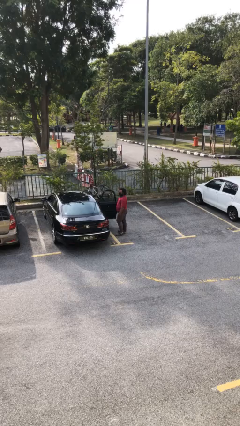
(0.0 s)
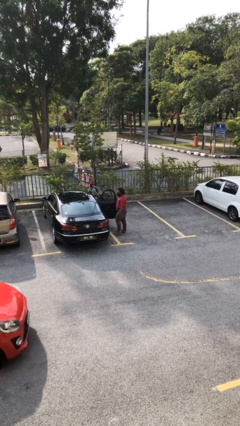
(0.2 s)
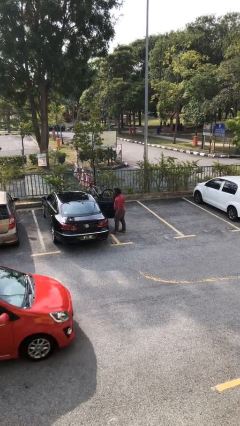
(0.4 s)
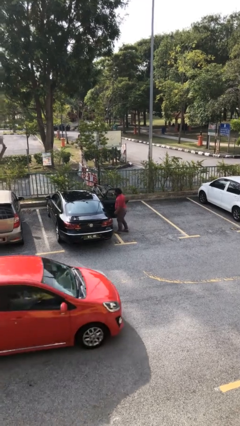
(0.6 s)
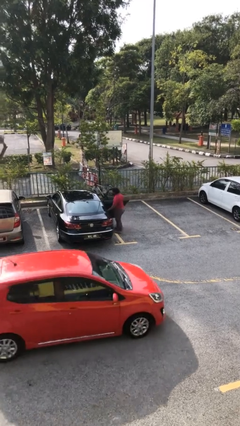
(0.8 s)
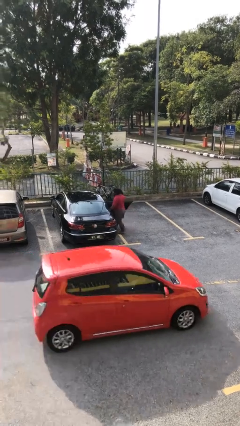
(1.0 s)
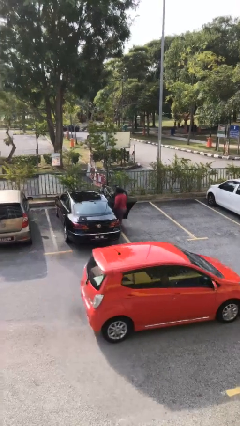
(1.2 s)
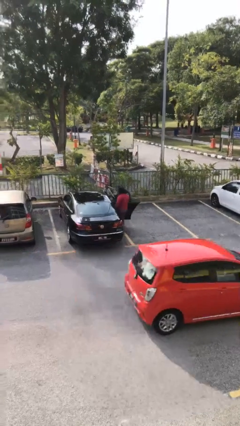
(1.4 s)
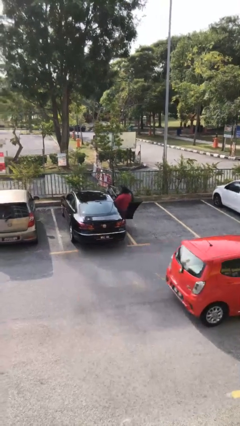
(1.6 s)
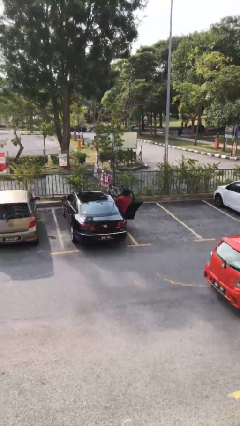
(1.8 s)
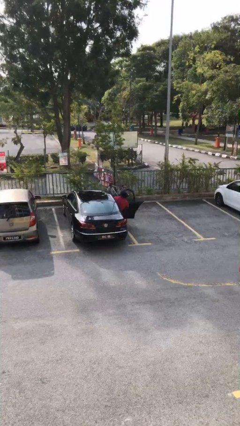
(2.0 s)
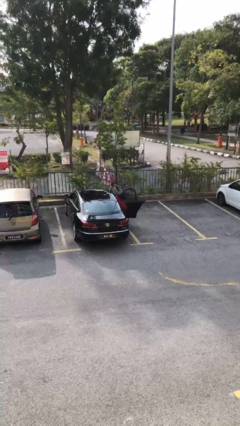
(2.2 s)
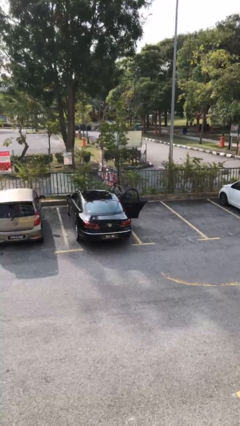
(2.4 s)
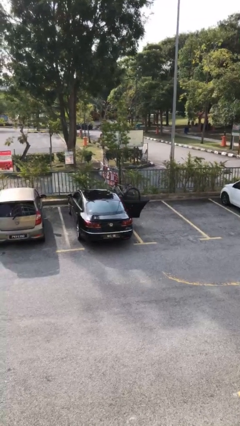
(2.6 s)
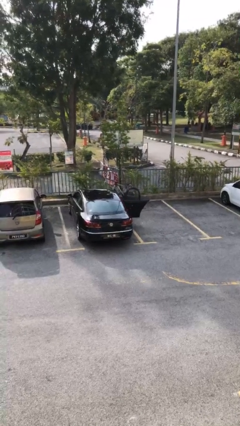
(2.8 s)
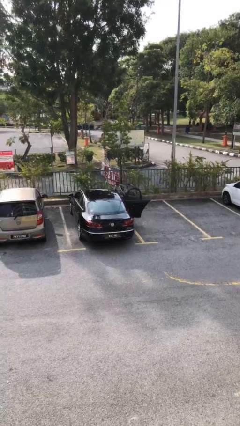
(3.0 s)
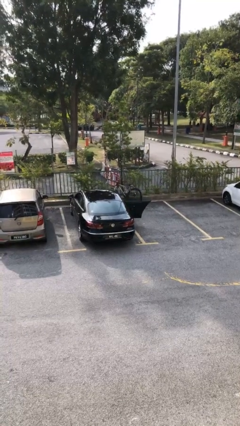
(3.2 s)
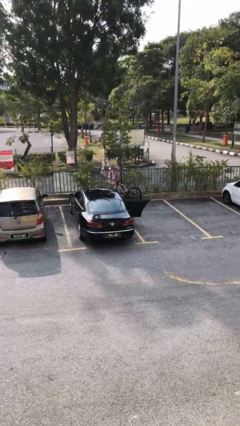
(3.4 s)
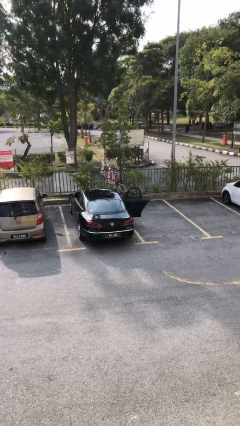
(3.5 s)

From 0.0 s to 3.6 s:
person enters car

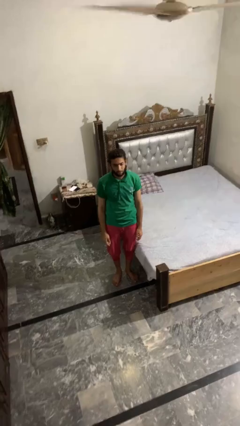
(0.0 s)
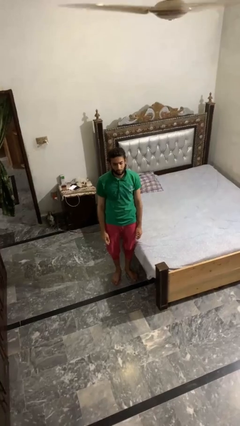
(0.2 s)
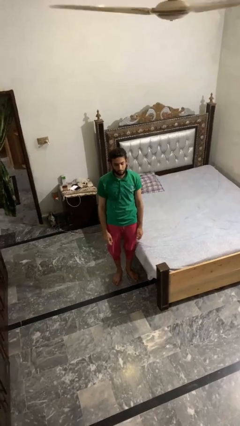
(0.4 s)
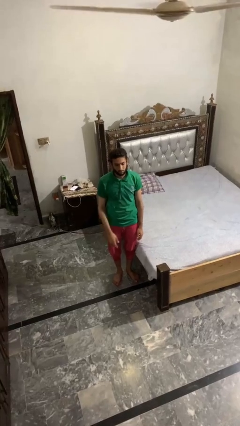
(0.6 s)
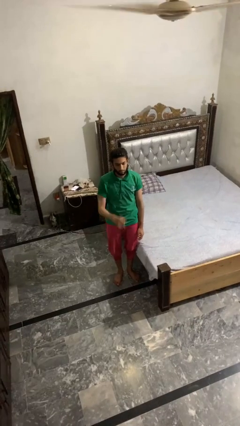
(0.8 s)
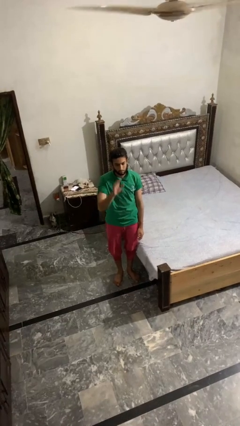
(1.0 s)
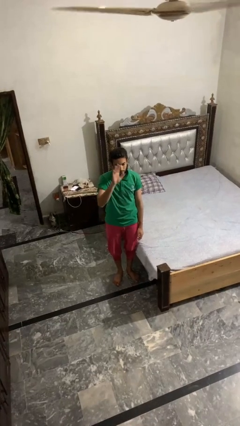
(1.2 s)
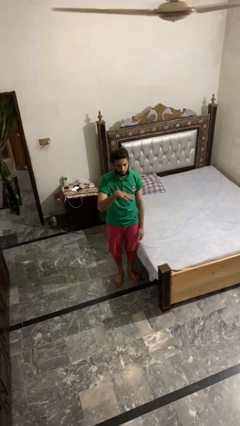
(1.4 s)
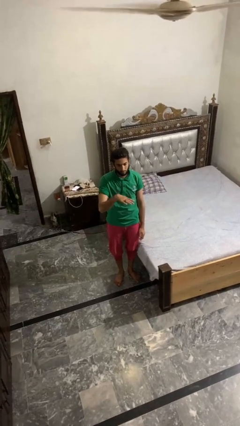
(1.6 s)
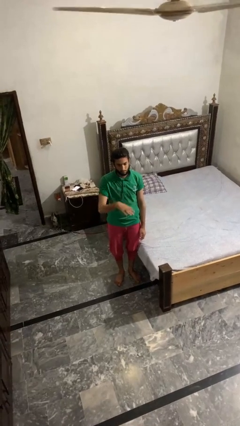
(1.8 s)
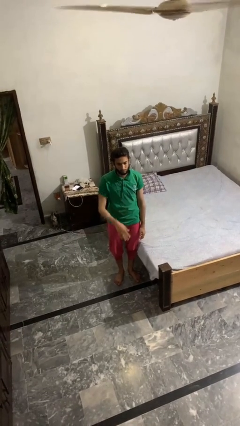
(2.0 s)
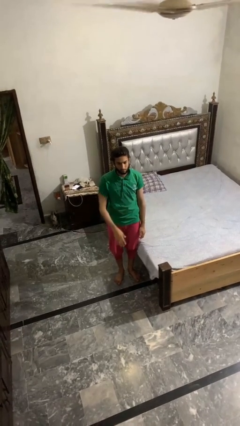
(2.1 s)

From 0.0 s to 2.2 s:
person gestures swipe down

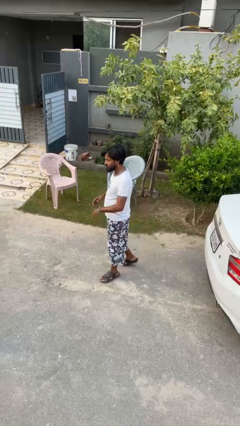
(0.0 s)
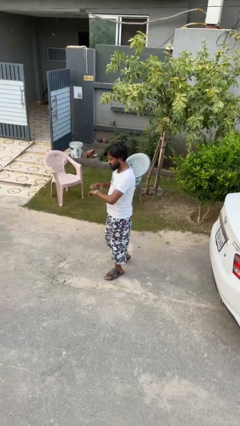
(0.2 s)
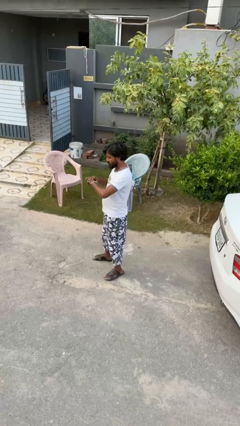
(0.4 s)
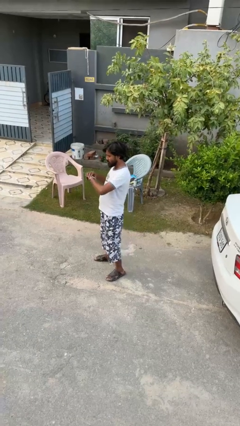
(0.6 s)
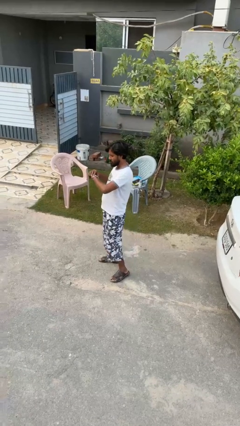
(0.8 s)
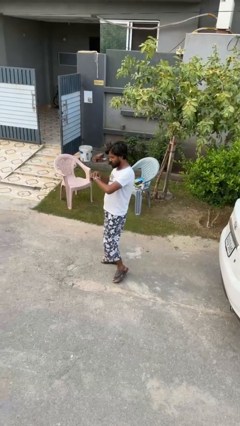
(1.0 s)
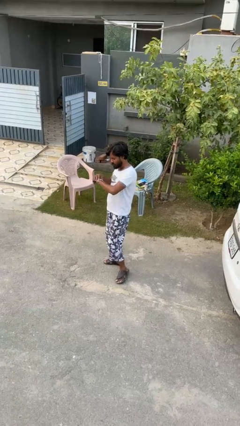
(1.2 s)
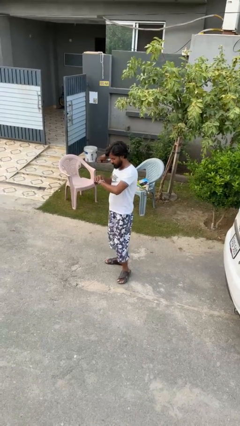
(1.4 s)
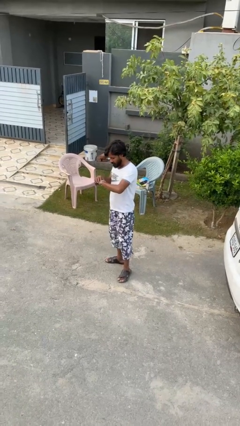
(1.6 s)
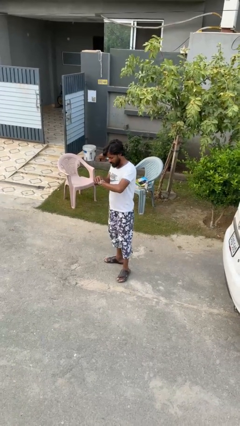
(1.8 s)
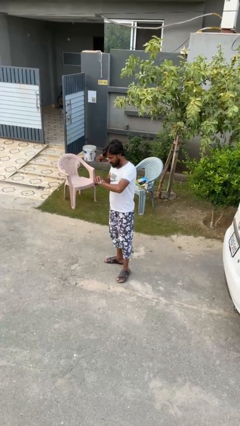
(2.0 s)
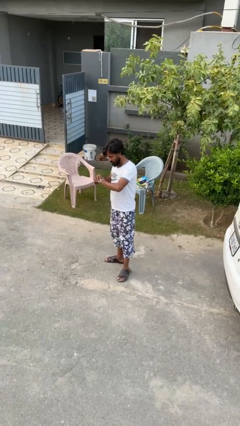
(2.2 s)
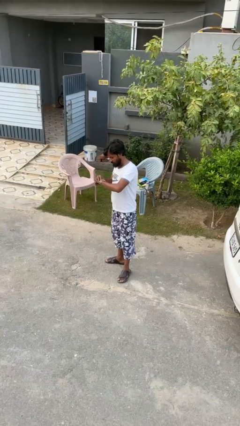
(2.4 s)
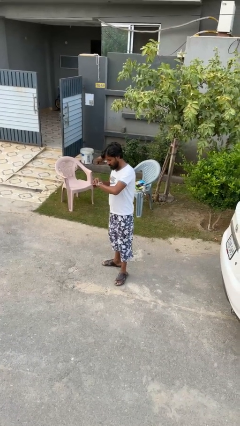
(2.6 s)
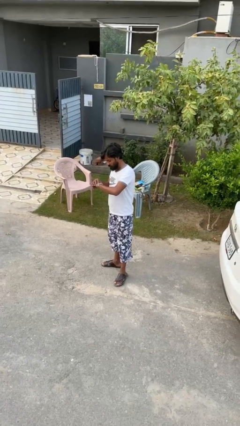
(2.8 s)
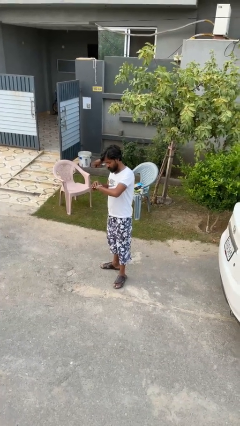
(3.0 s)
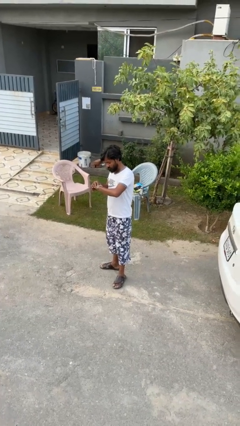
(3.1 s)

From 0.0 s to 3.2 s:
person looks at wristwatch

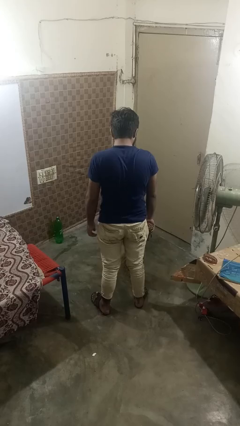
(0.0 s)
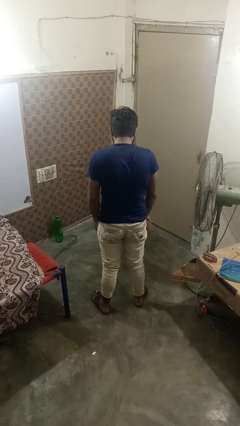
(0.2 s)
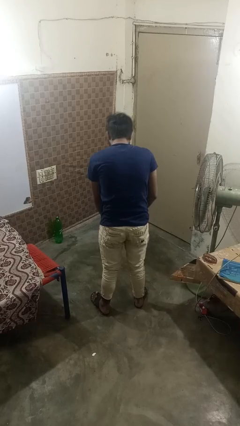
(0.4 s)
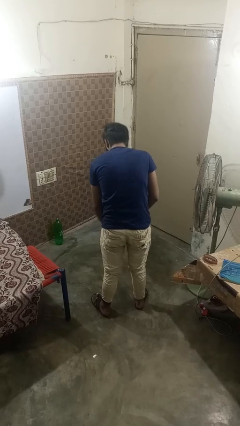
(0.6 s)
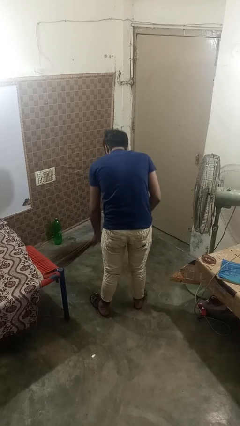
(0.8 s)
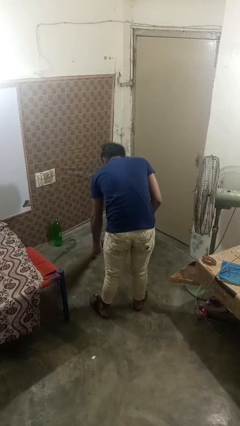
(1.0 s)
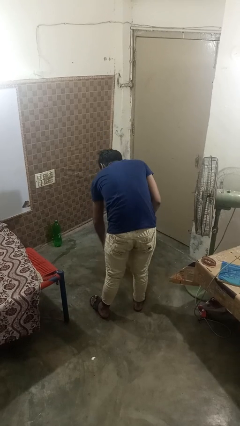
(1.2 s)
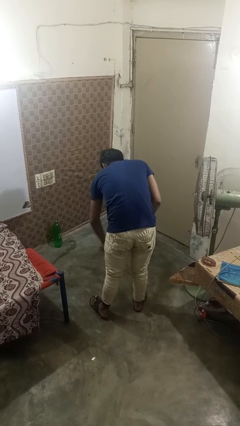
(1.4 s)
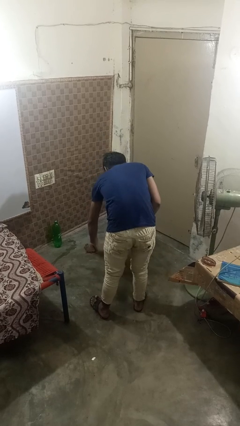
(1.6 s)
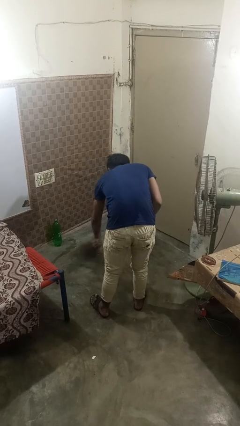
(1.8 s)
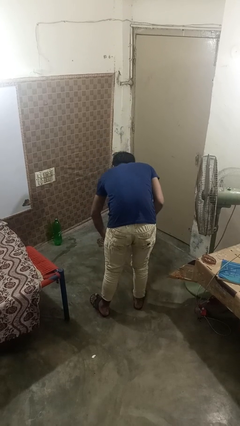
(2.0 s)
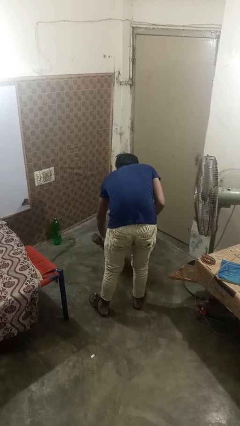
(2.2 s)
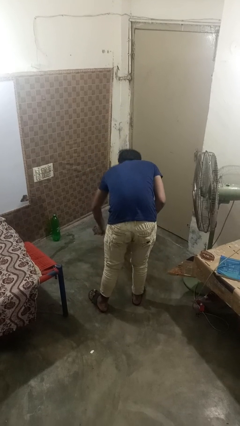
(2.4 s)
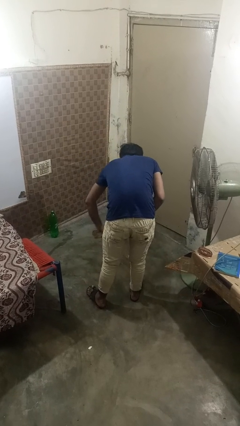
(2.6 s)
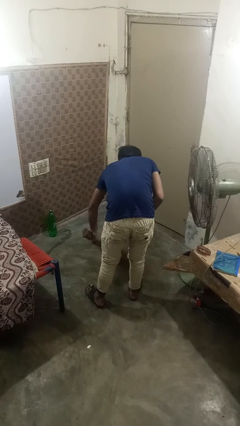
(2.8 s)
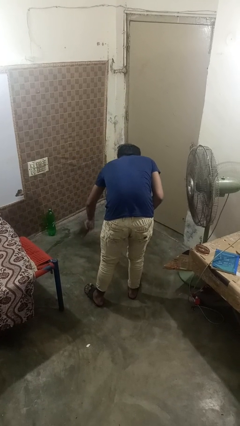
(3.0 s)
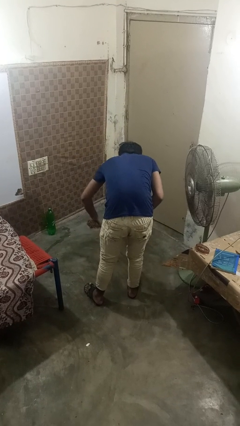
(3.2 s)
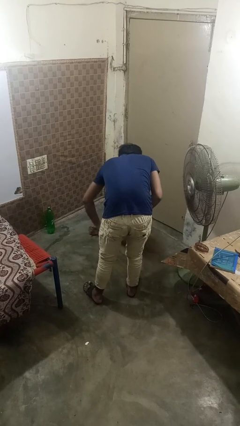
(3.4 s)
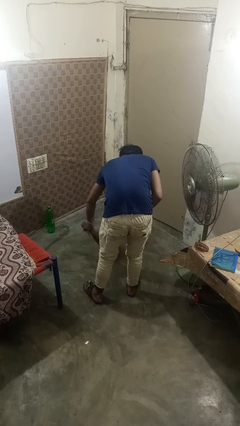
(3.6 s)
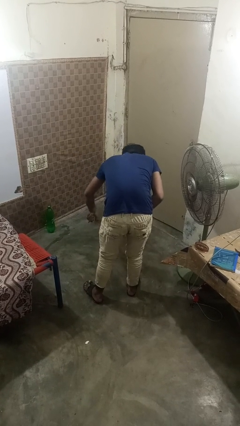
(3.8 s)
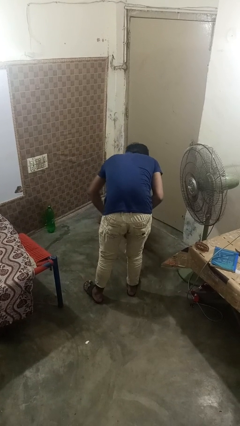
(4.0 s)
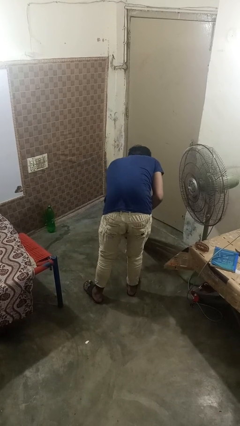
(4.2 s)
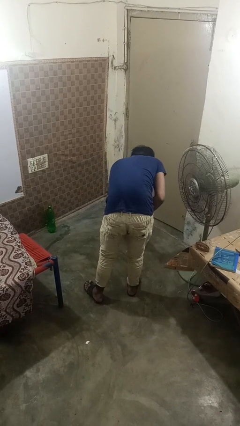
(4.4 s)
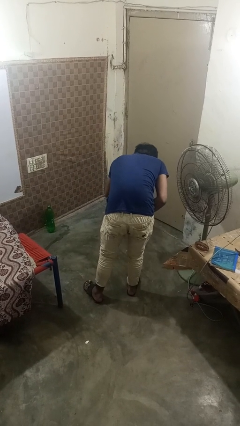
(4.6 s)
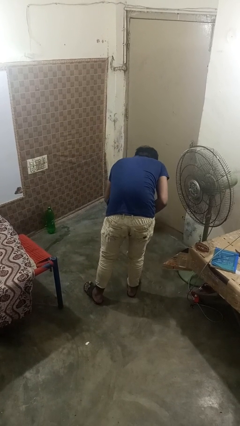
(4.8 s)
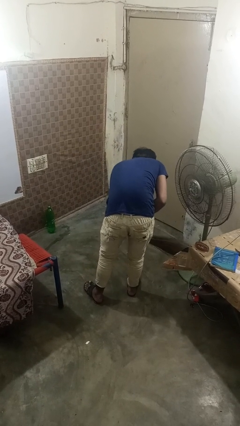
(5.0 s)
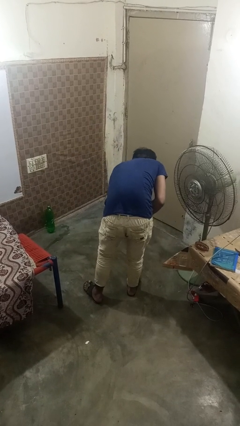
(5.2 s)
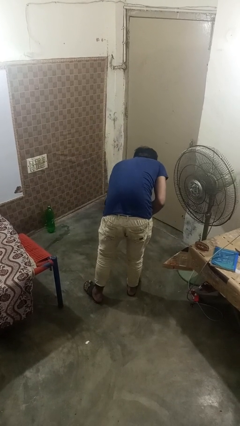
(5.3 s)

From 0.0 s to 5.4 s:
person sweeps floor

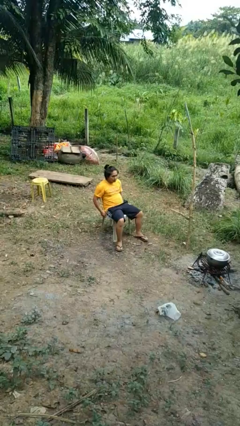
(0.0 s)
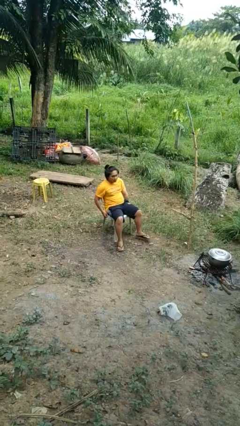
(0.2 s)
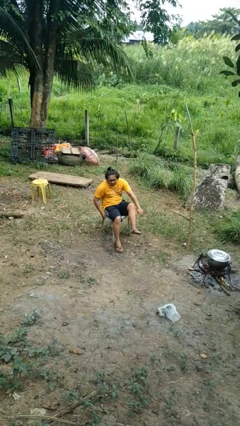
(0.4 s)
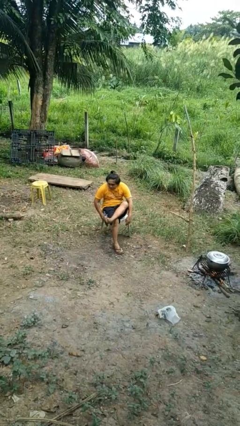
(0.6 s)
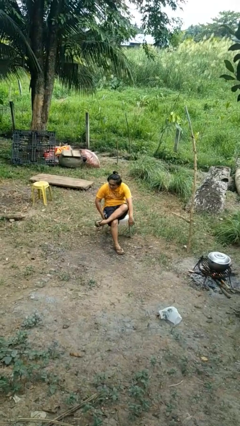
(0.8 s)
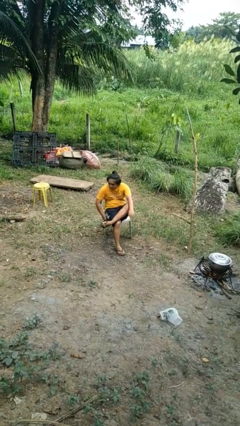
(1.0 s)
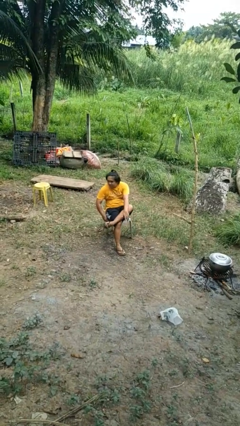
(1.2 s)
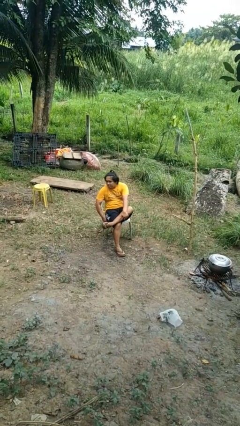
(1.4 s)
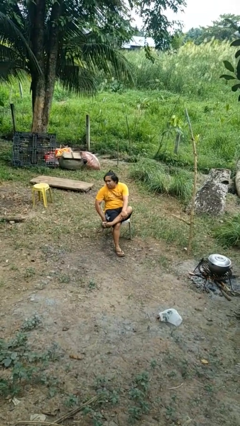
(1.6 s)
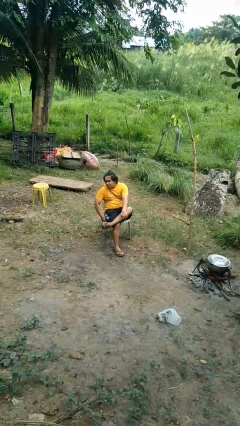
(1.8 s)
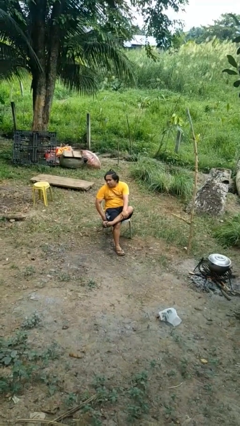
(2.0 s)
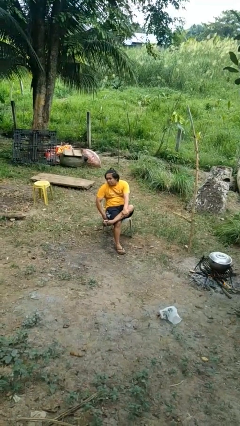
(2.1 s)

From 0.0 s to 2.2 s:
person crosses legs

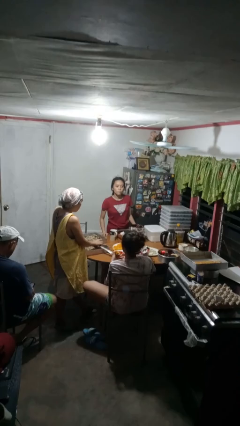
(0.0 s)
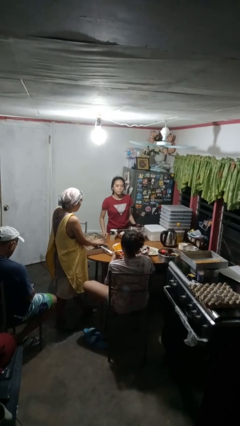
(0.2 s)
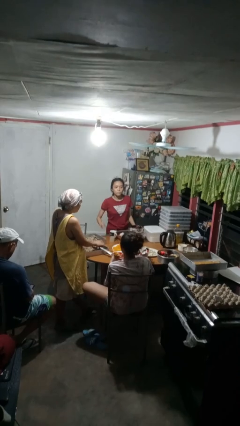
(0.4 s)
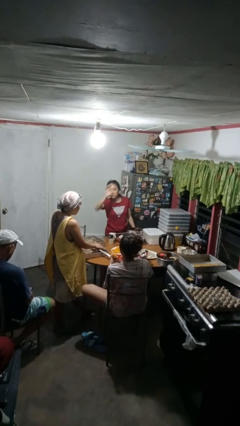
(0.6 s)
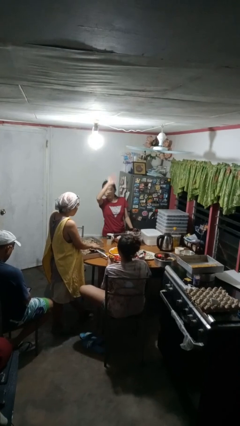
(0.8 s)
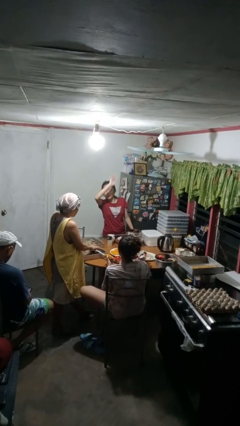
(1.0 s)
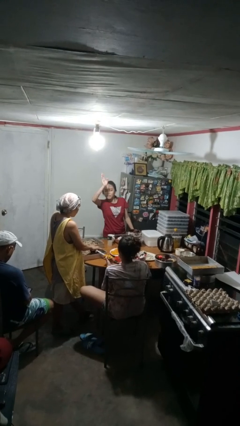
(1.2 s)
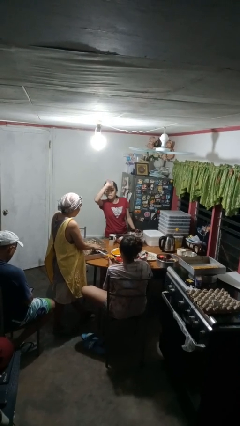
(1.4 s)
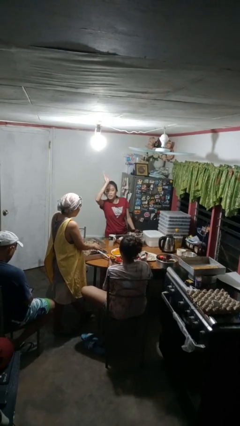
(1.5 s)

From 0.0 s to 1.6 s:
person waves at person
